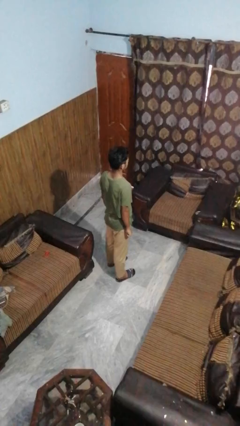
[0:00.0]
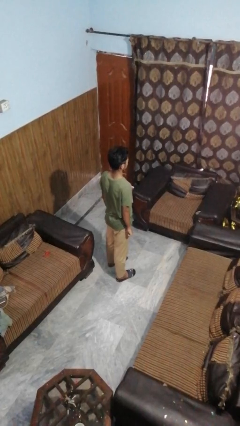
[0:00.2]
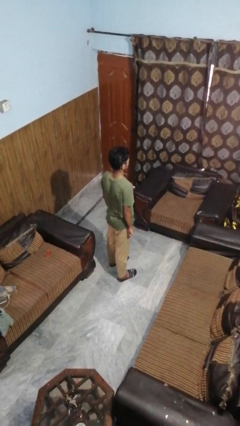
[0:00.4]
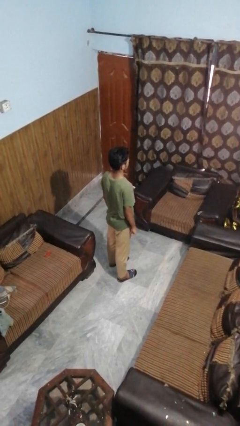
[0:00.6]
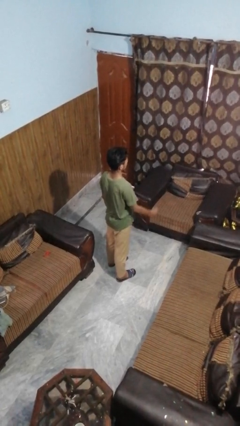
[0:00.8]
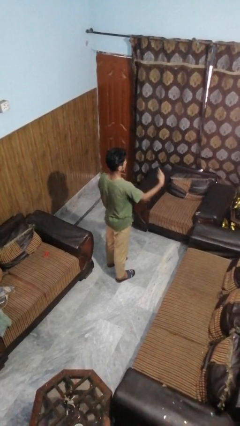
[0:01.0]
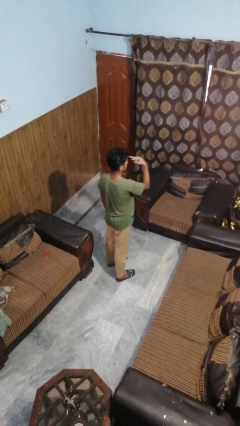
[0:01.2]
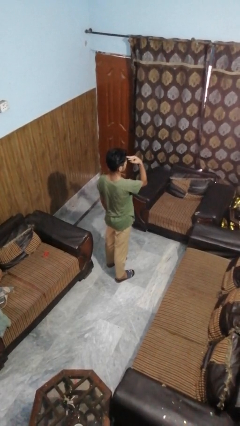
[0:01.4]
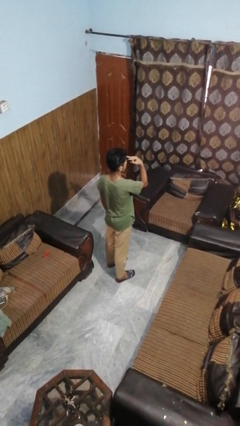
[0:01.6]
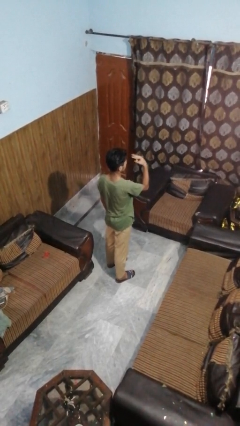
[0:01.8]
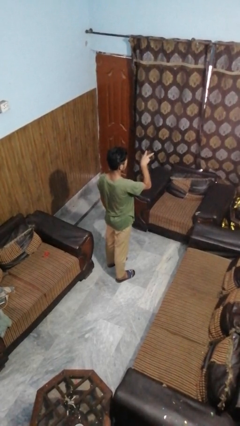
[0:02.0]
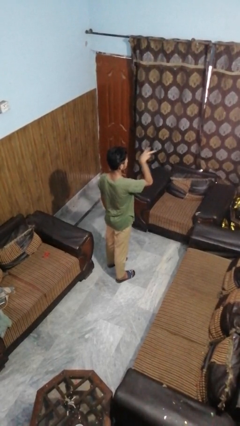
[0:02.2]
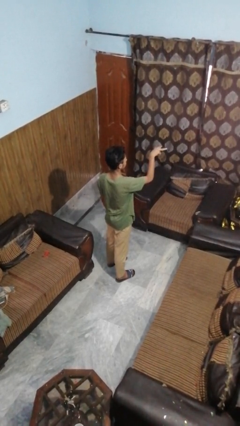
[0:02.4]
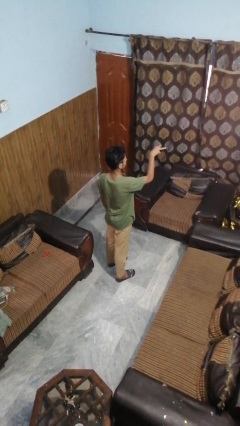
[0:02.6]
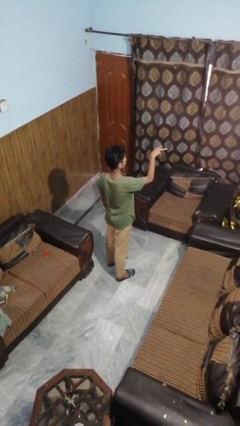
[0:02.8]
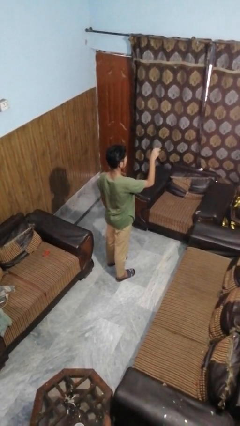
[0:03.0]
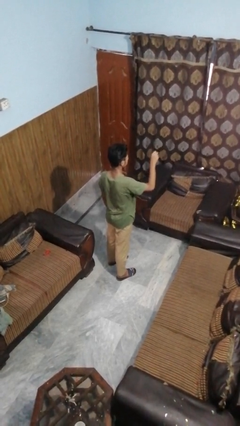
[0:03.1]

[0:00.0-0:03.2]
person gestures watch closely

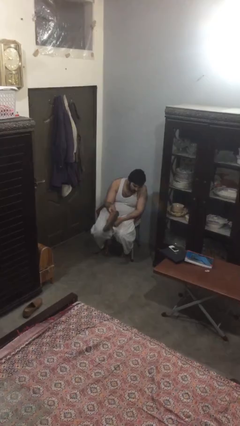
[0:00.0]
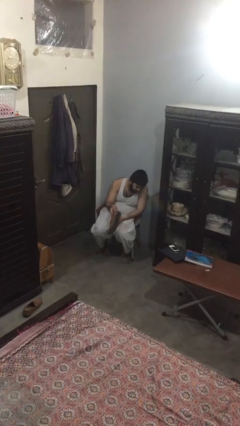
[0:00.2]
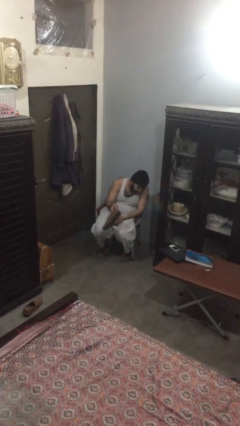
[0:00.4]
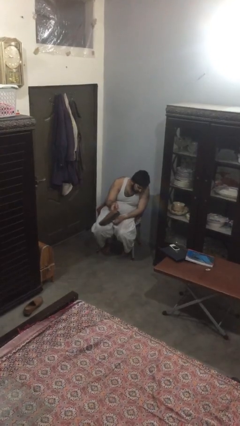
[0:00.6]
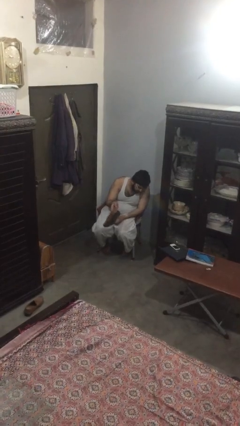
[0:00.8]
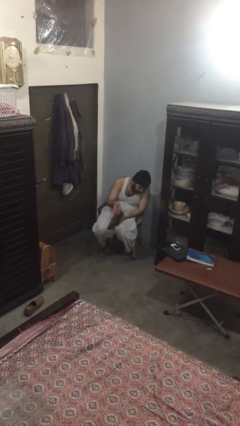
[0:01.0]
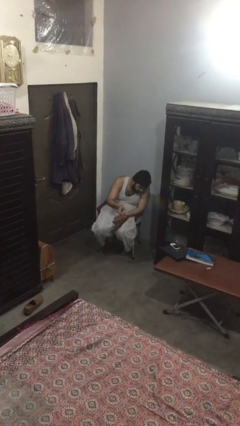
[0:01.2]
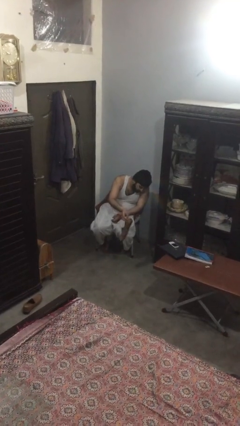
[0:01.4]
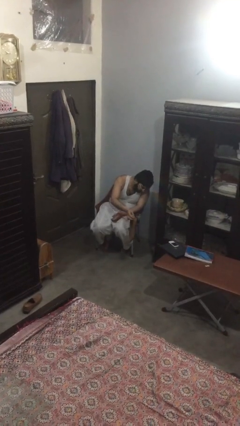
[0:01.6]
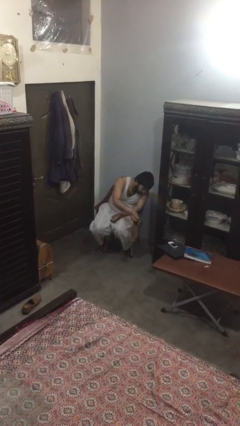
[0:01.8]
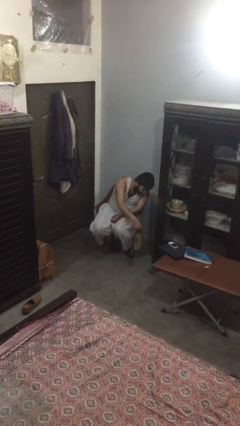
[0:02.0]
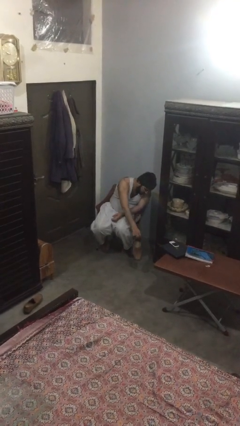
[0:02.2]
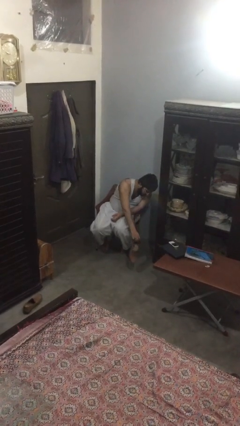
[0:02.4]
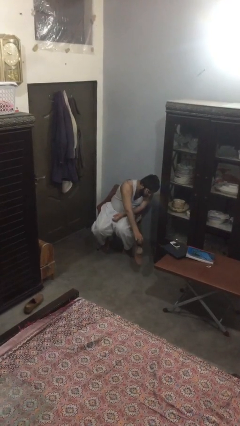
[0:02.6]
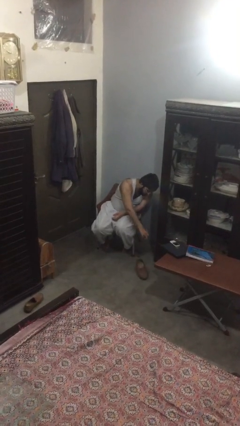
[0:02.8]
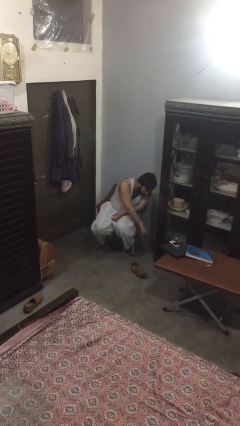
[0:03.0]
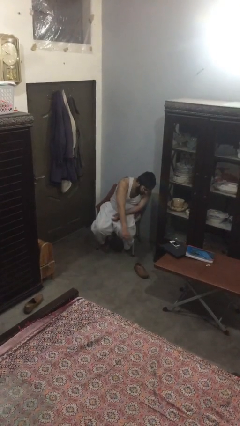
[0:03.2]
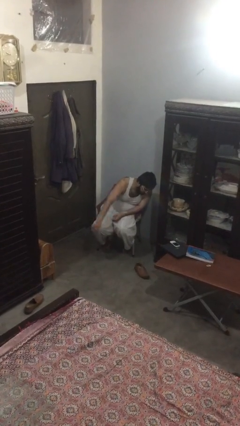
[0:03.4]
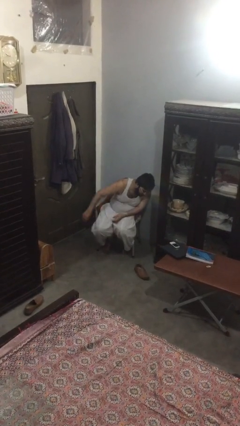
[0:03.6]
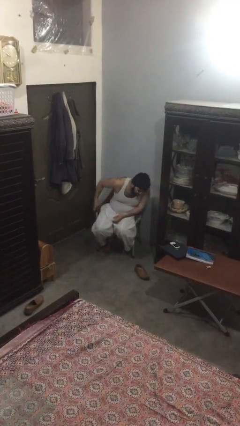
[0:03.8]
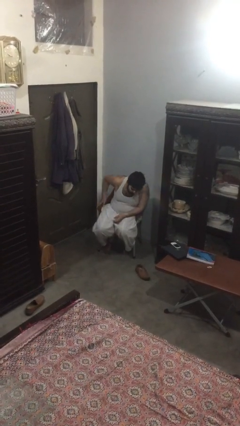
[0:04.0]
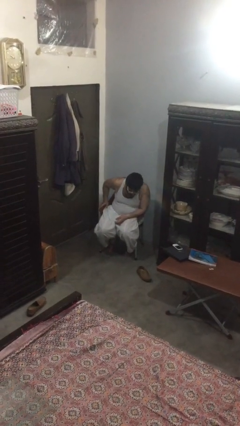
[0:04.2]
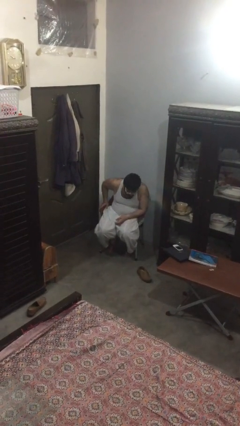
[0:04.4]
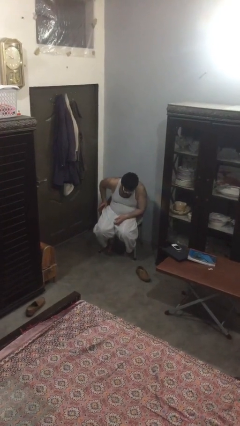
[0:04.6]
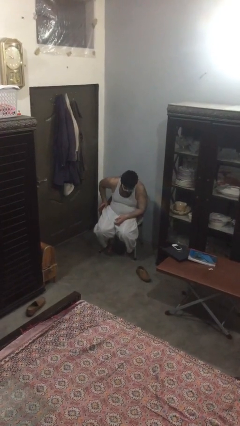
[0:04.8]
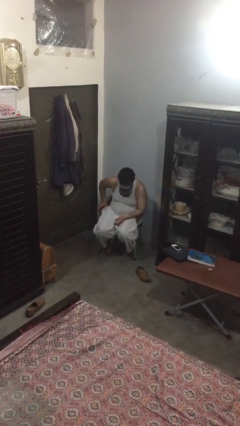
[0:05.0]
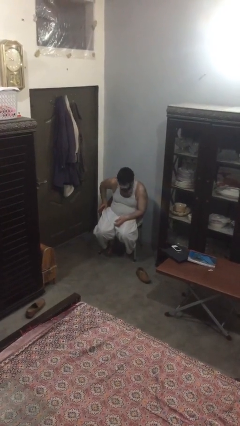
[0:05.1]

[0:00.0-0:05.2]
person puts down object on floor

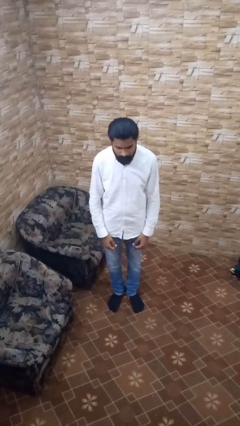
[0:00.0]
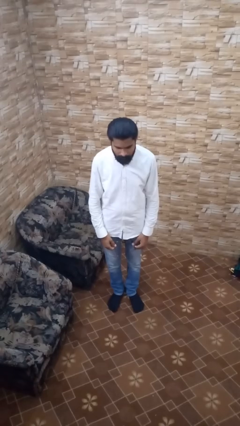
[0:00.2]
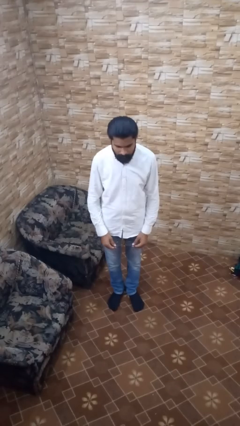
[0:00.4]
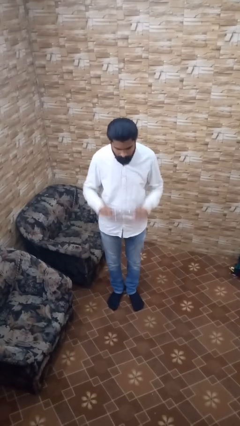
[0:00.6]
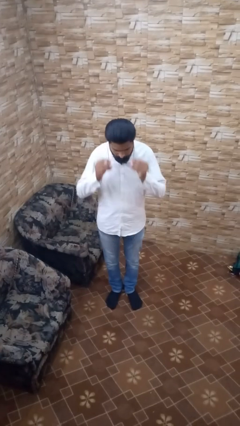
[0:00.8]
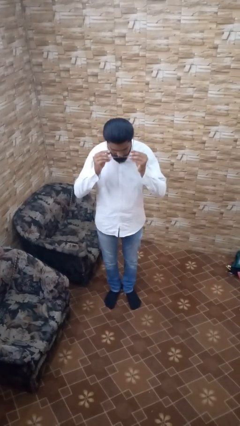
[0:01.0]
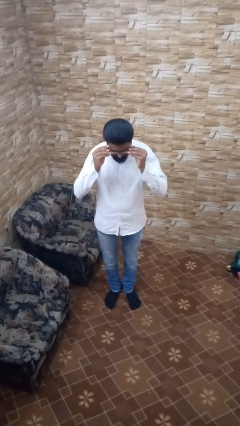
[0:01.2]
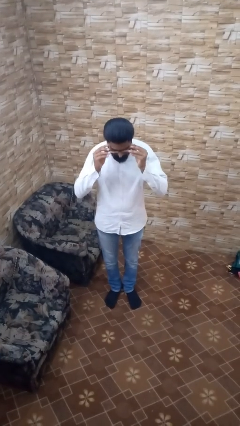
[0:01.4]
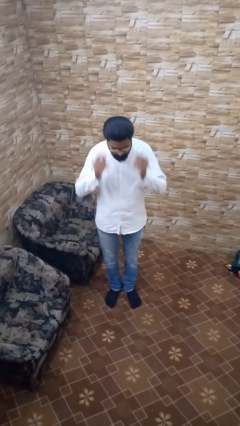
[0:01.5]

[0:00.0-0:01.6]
person puts on glasses

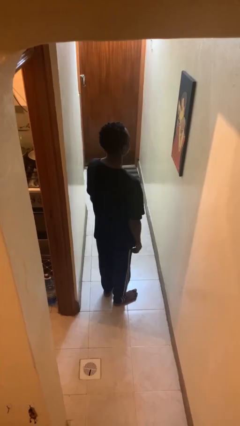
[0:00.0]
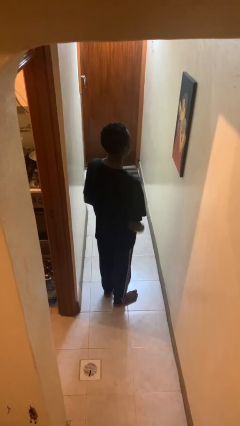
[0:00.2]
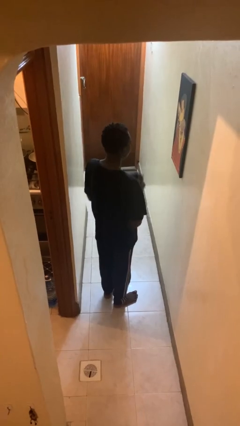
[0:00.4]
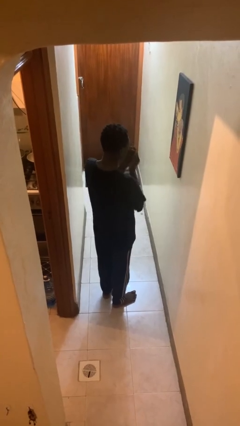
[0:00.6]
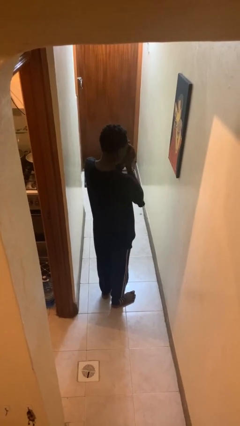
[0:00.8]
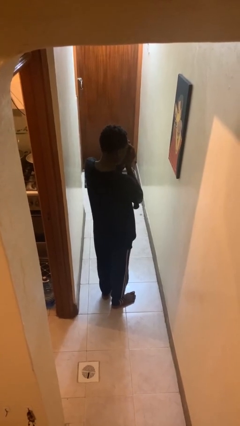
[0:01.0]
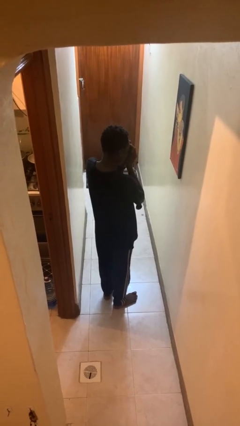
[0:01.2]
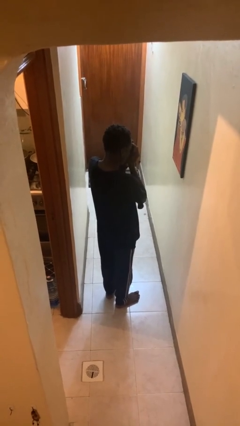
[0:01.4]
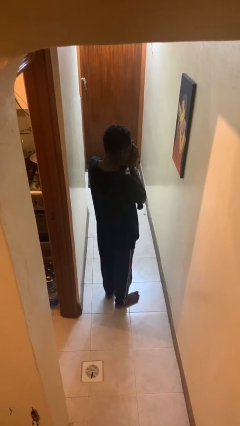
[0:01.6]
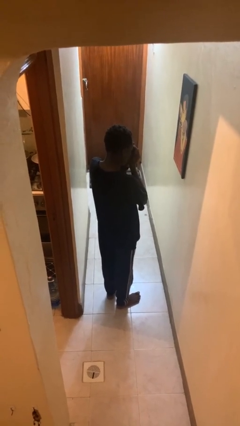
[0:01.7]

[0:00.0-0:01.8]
person shades eyes

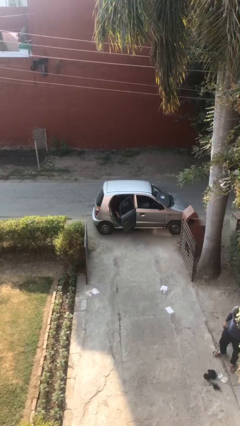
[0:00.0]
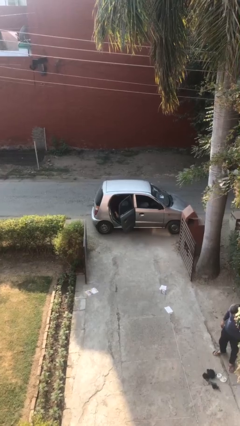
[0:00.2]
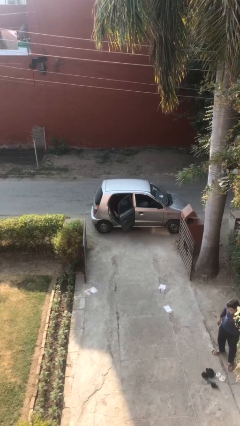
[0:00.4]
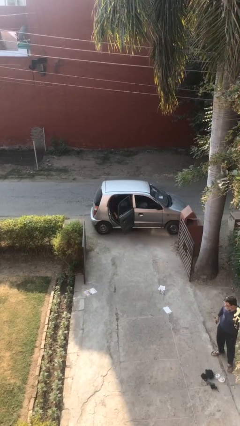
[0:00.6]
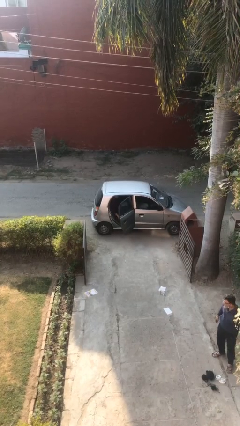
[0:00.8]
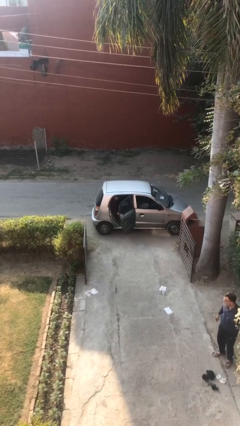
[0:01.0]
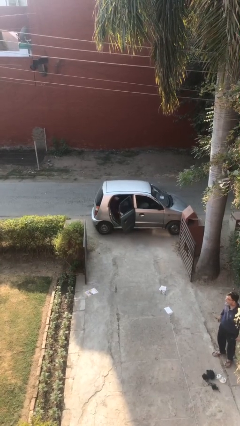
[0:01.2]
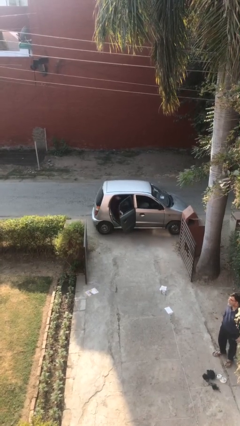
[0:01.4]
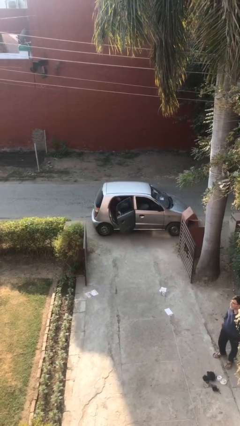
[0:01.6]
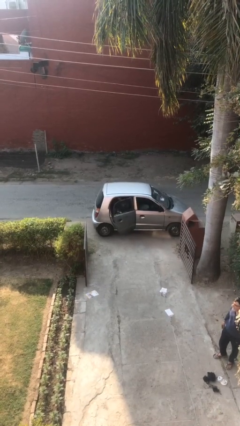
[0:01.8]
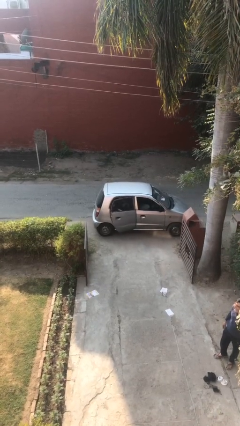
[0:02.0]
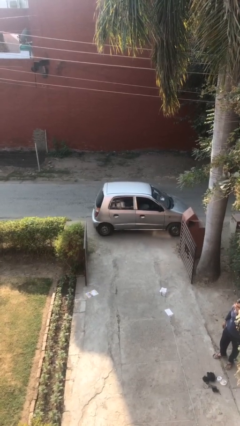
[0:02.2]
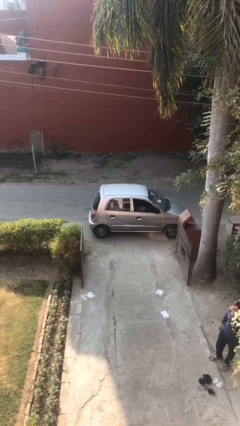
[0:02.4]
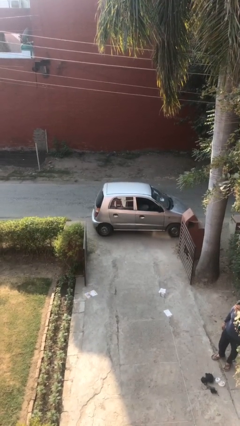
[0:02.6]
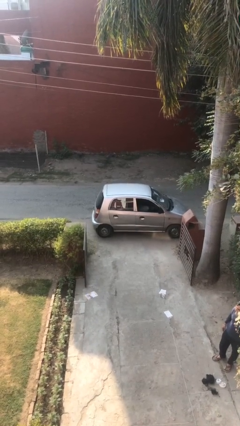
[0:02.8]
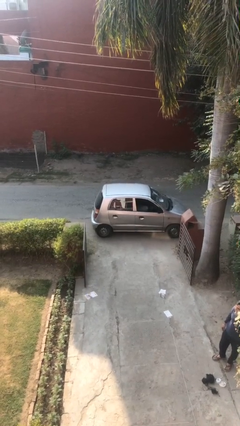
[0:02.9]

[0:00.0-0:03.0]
person closes car door

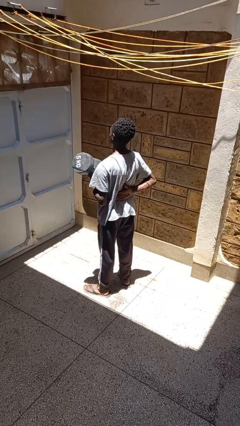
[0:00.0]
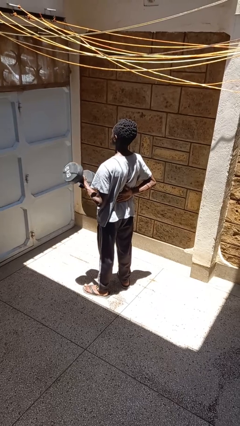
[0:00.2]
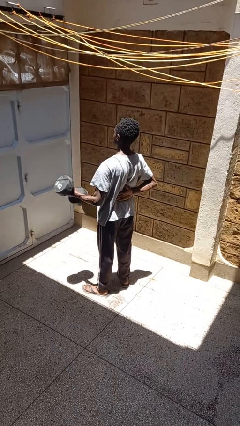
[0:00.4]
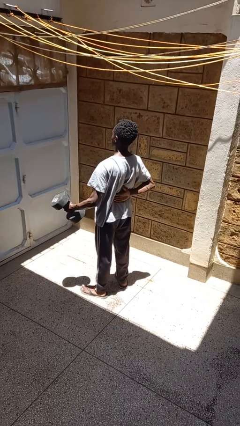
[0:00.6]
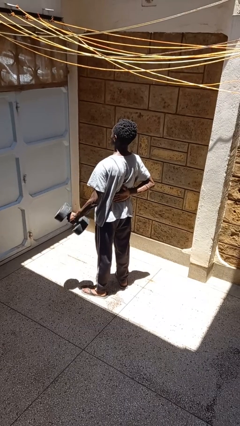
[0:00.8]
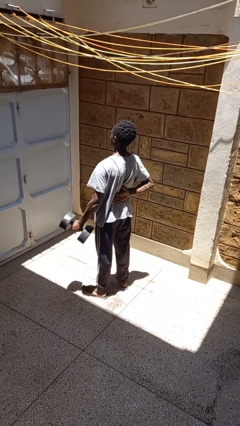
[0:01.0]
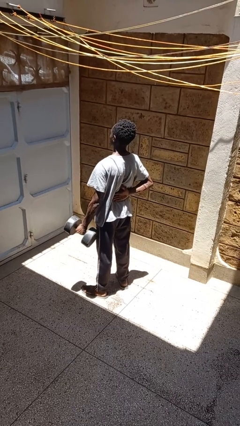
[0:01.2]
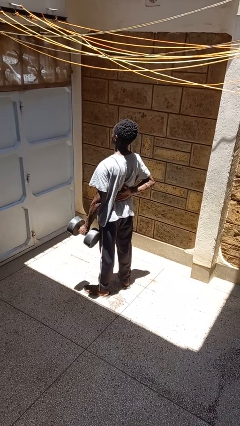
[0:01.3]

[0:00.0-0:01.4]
person lifts dumbbells

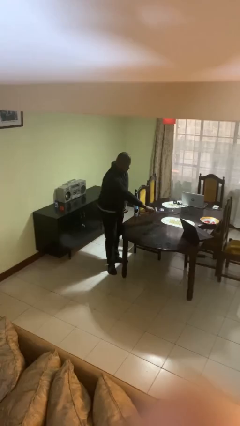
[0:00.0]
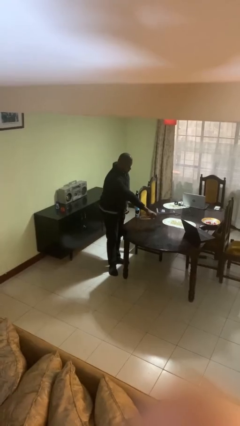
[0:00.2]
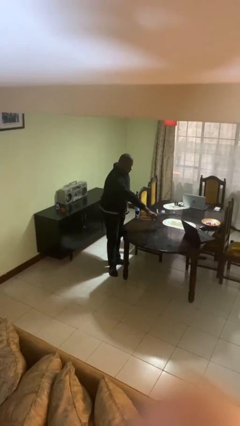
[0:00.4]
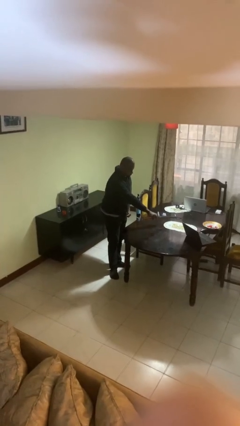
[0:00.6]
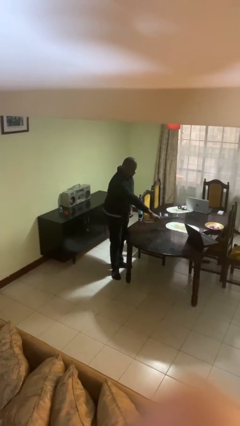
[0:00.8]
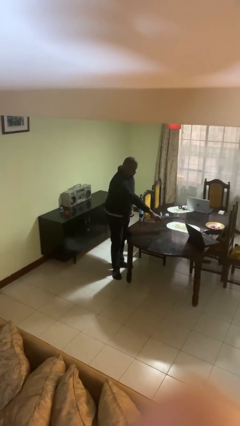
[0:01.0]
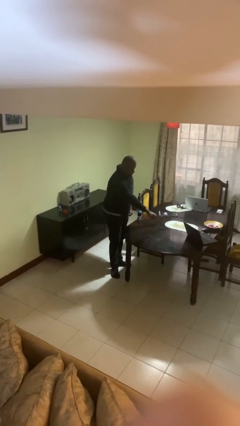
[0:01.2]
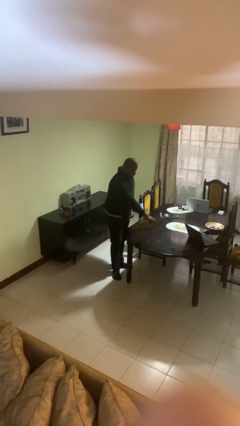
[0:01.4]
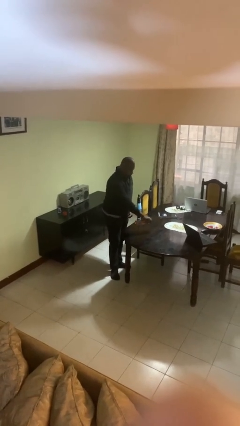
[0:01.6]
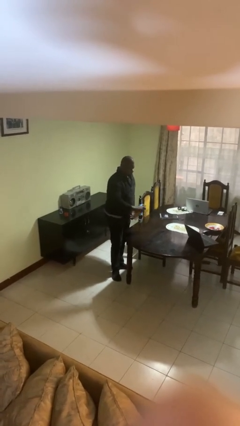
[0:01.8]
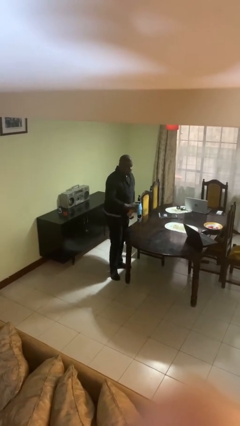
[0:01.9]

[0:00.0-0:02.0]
person sprays from bottle
